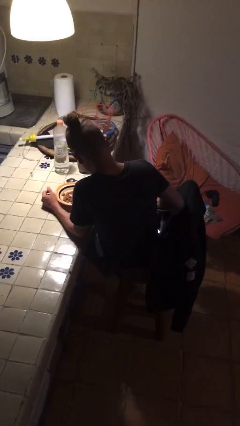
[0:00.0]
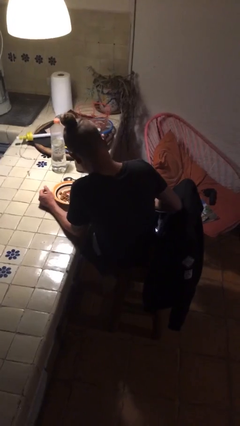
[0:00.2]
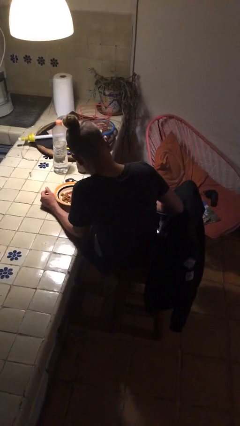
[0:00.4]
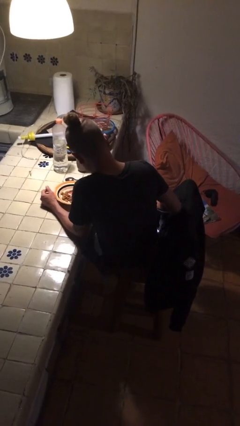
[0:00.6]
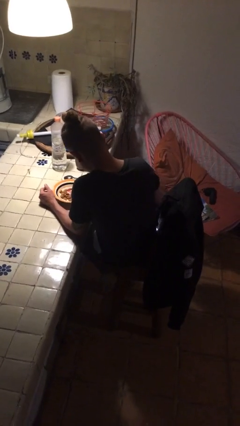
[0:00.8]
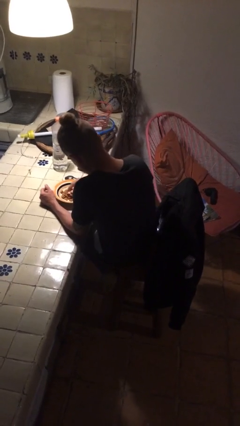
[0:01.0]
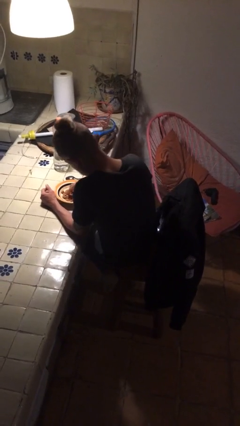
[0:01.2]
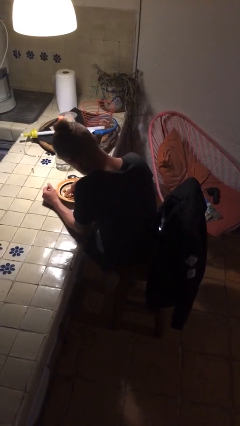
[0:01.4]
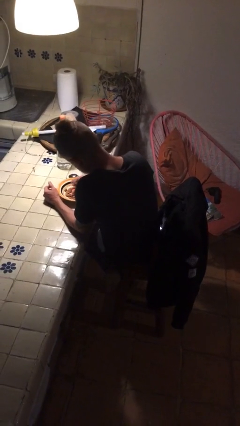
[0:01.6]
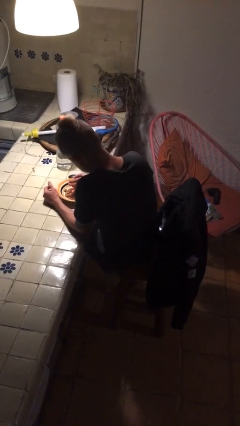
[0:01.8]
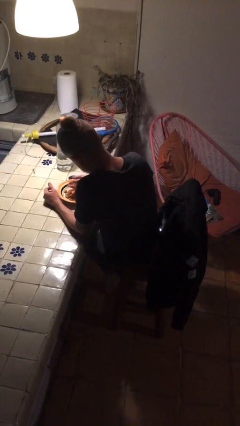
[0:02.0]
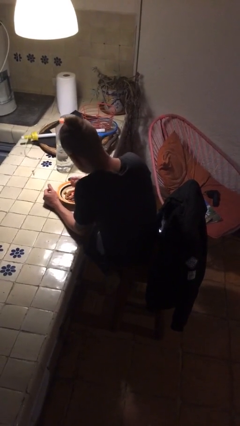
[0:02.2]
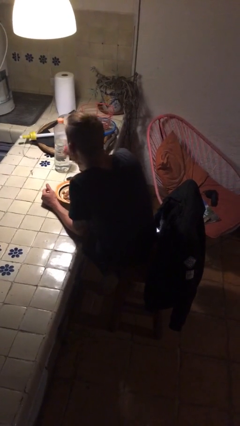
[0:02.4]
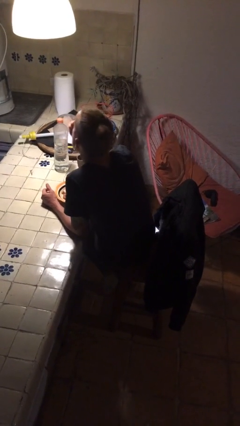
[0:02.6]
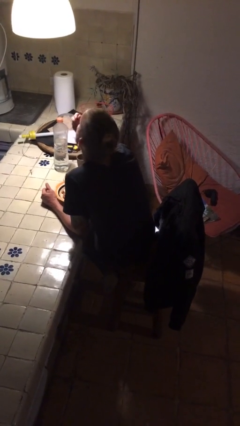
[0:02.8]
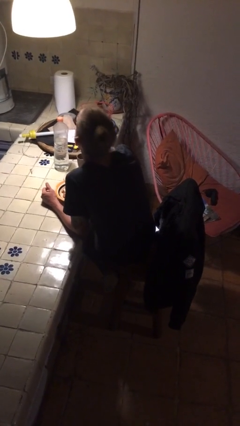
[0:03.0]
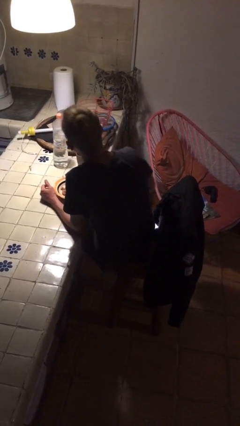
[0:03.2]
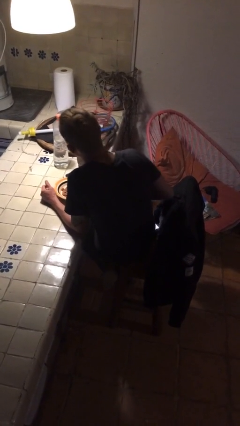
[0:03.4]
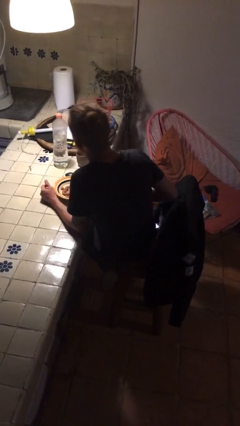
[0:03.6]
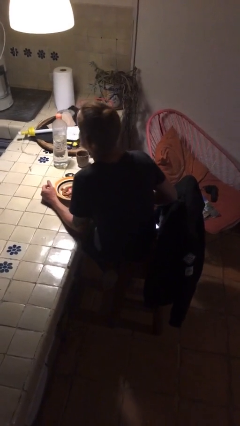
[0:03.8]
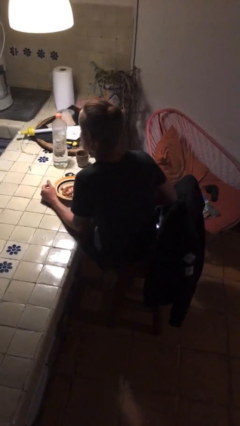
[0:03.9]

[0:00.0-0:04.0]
person eats with hands

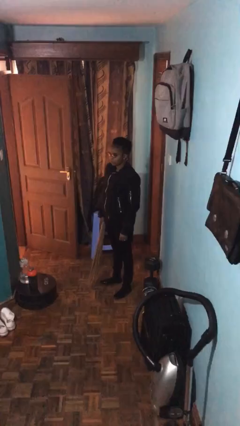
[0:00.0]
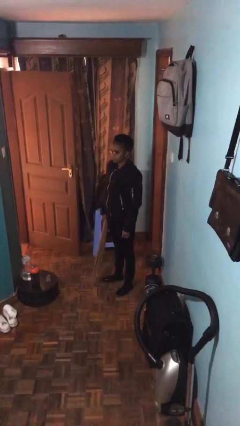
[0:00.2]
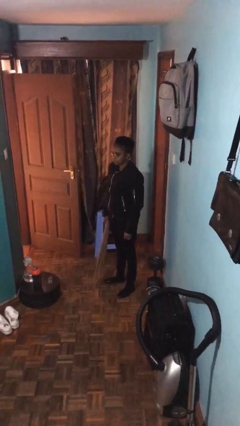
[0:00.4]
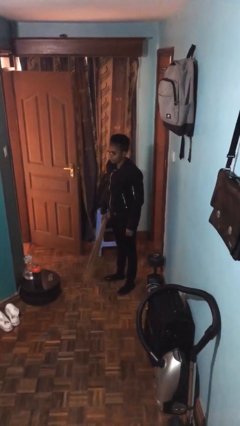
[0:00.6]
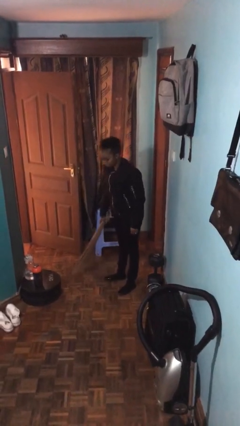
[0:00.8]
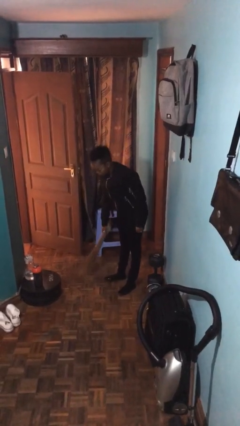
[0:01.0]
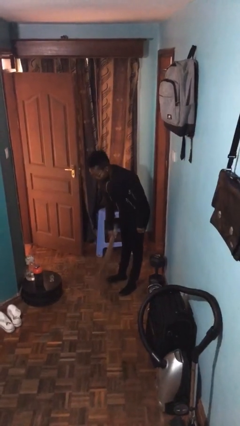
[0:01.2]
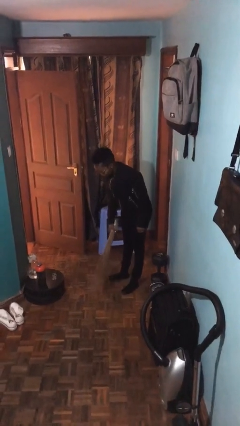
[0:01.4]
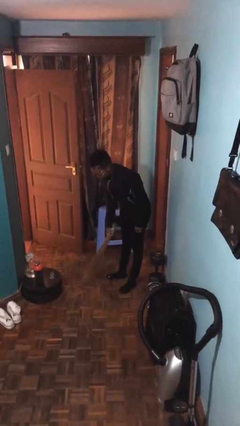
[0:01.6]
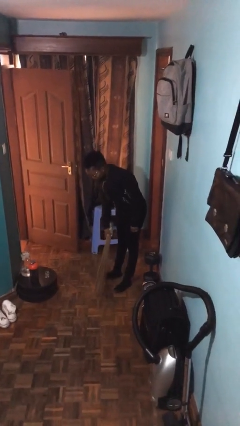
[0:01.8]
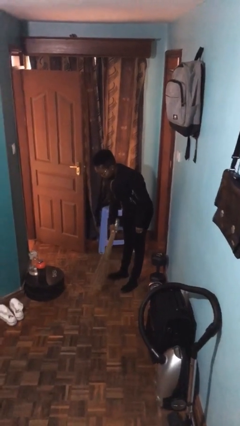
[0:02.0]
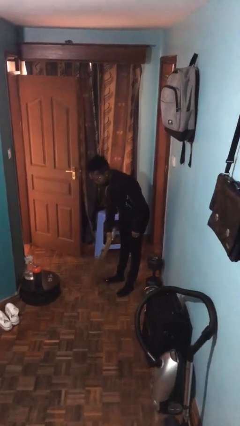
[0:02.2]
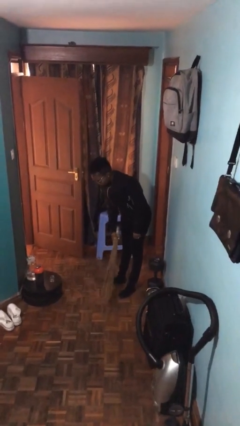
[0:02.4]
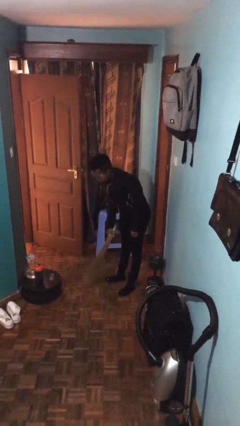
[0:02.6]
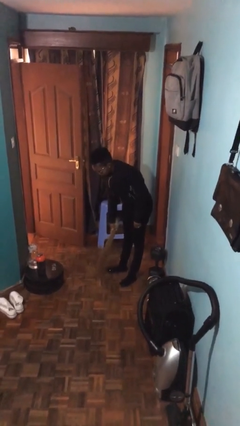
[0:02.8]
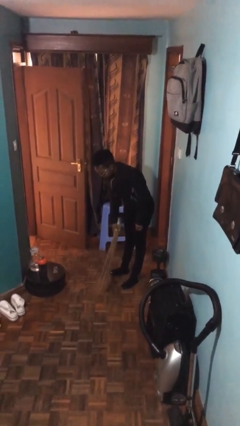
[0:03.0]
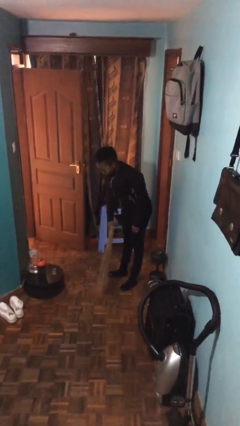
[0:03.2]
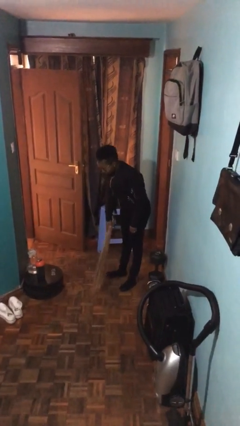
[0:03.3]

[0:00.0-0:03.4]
person sweeps floor

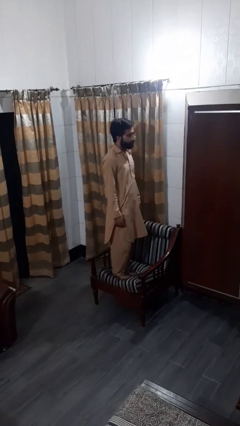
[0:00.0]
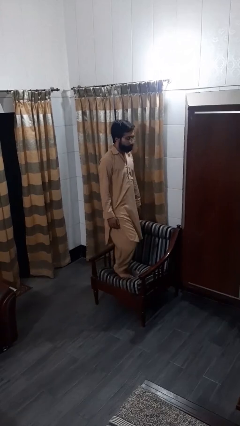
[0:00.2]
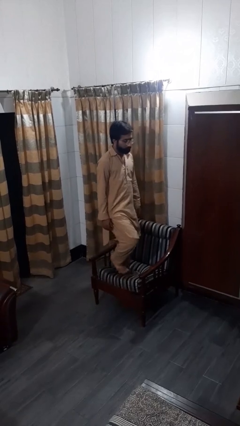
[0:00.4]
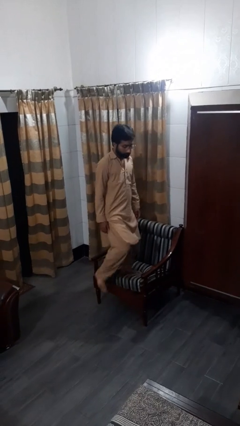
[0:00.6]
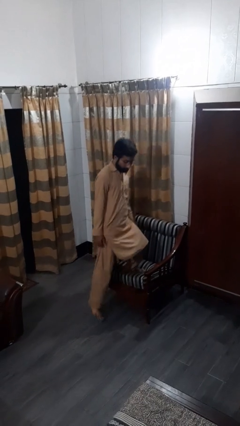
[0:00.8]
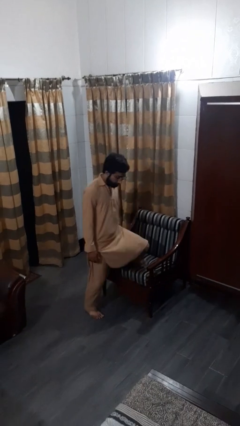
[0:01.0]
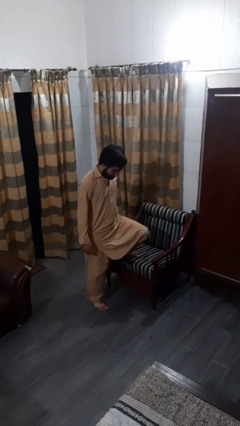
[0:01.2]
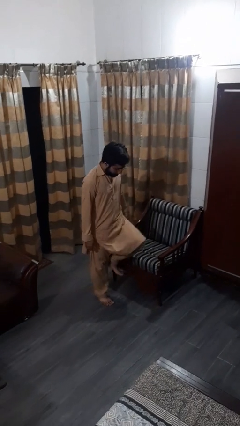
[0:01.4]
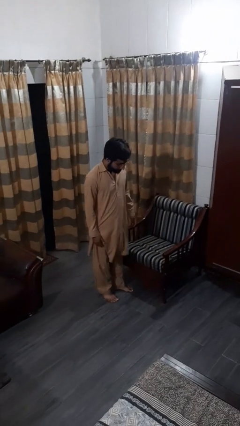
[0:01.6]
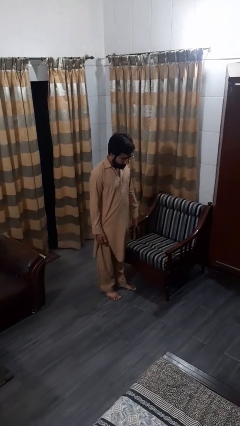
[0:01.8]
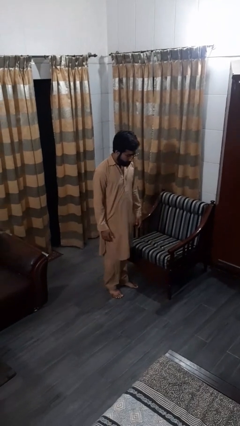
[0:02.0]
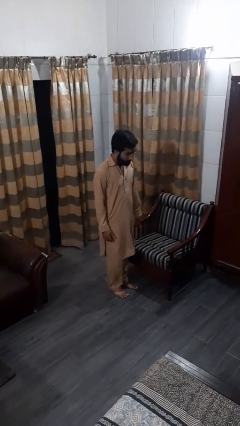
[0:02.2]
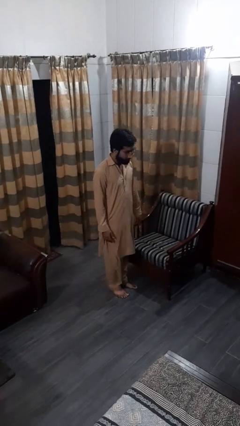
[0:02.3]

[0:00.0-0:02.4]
person climbs off chair

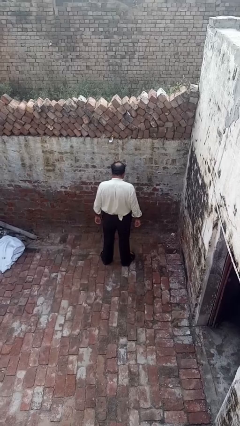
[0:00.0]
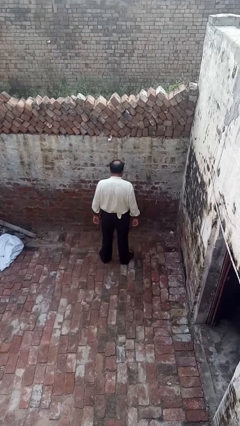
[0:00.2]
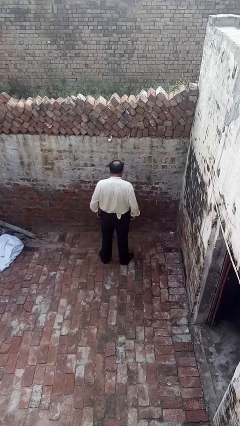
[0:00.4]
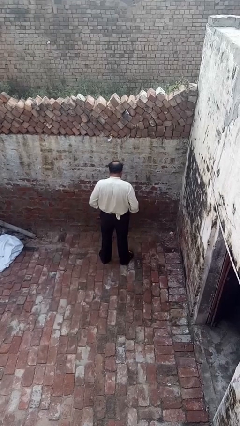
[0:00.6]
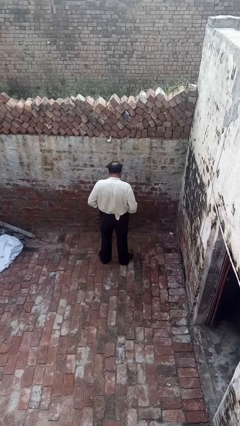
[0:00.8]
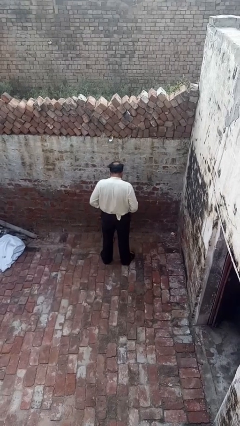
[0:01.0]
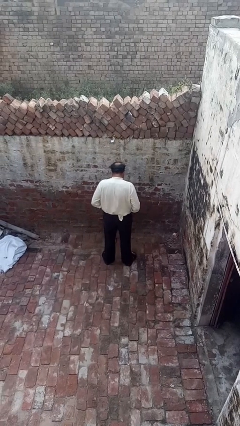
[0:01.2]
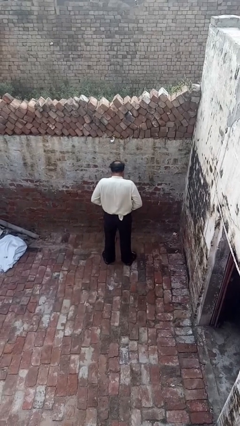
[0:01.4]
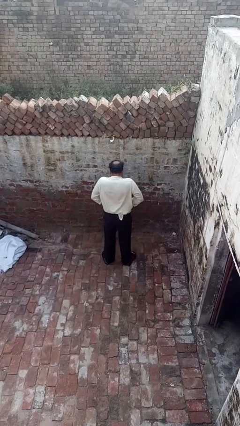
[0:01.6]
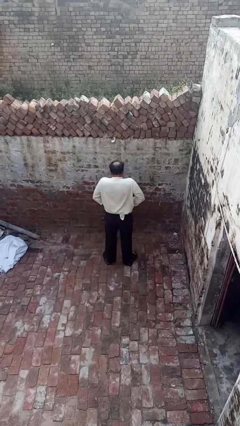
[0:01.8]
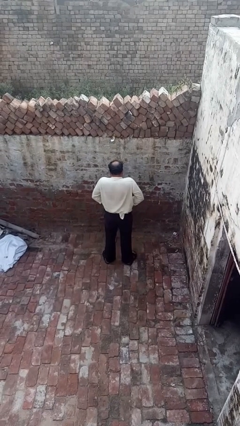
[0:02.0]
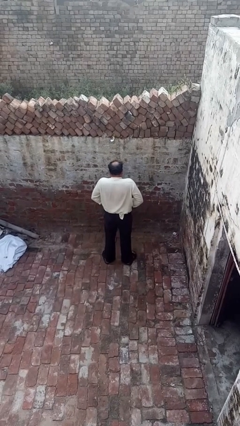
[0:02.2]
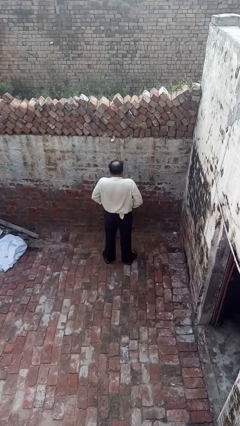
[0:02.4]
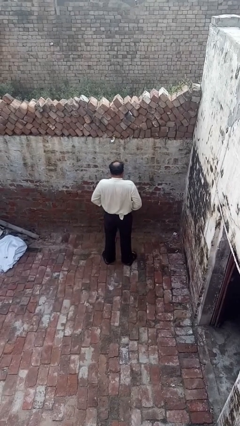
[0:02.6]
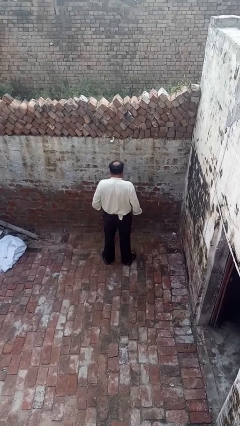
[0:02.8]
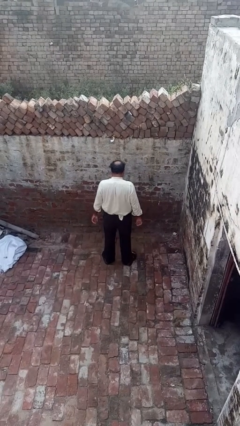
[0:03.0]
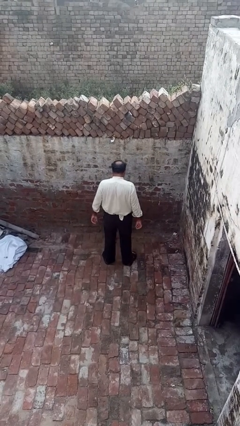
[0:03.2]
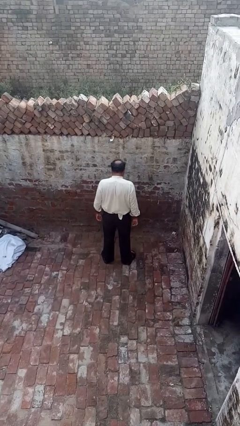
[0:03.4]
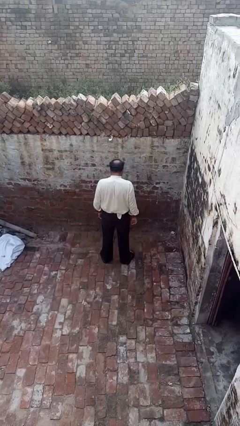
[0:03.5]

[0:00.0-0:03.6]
person hikes up pants

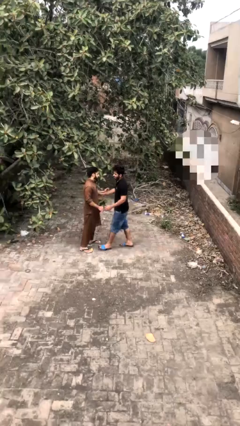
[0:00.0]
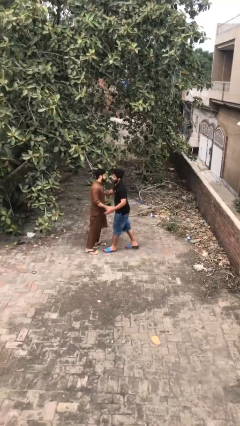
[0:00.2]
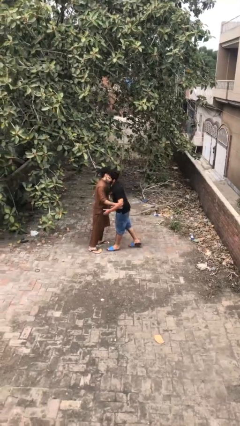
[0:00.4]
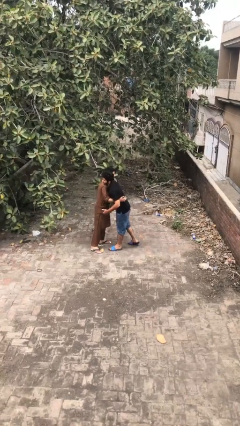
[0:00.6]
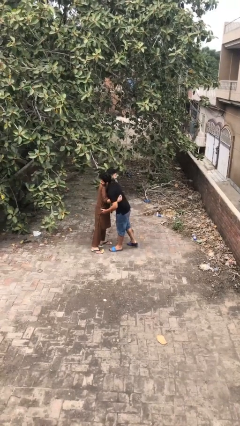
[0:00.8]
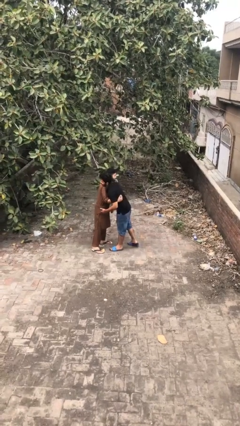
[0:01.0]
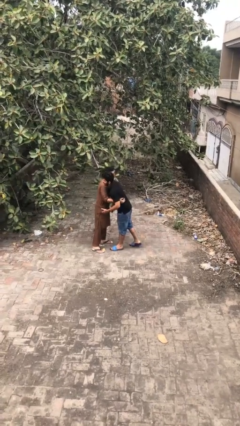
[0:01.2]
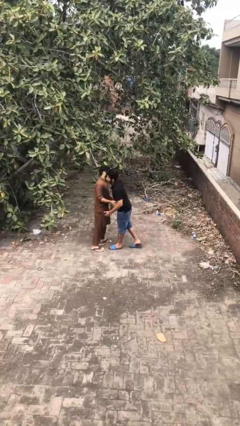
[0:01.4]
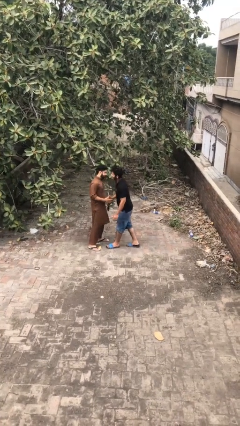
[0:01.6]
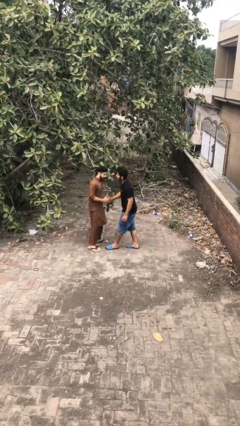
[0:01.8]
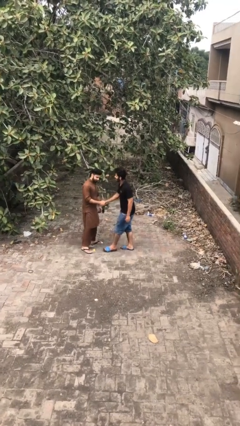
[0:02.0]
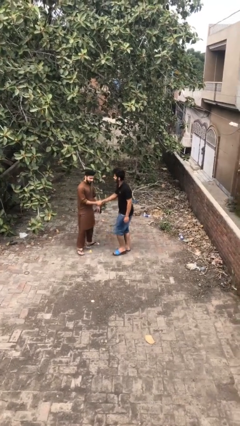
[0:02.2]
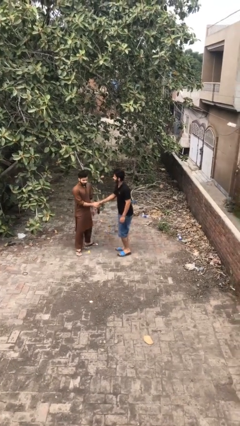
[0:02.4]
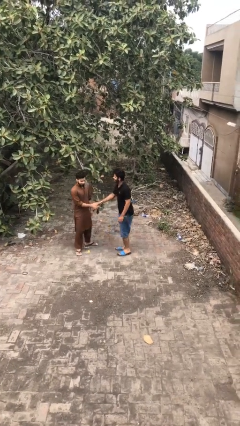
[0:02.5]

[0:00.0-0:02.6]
person embraces person

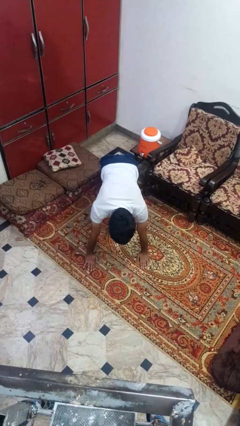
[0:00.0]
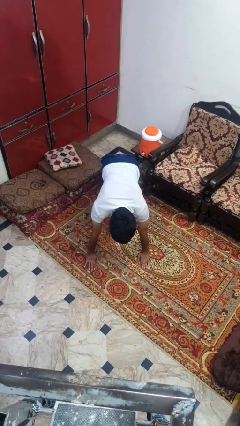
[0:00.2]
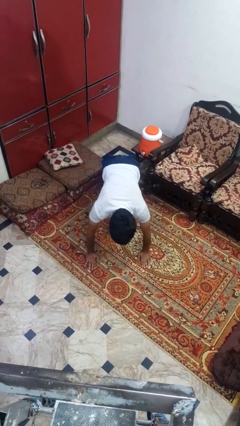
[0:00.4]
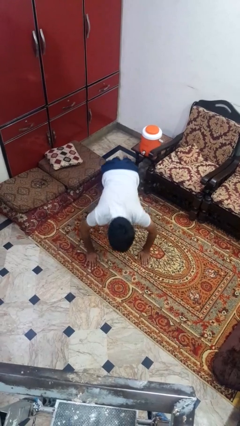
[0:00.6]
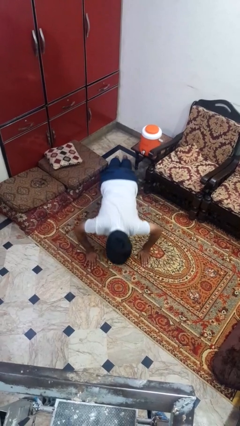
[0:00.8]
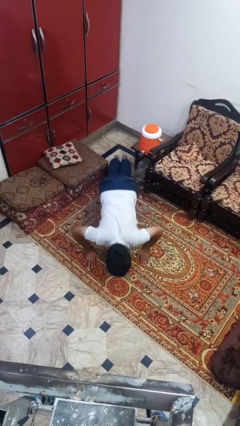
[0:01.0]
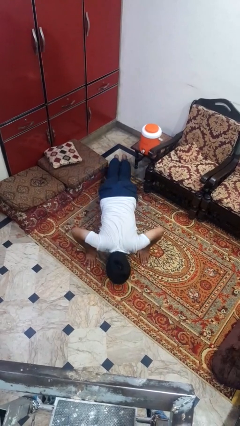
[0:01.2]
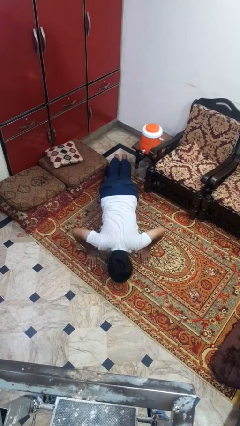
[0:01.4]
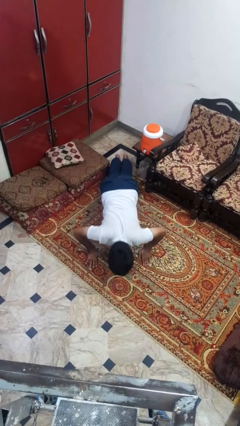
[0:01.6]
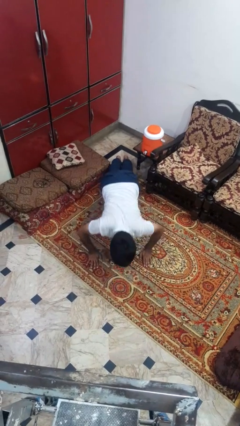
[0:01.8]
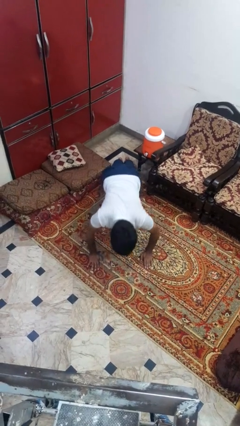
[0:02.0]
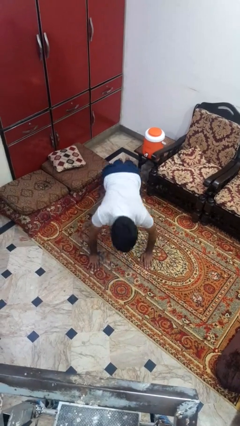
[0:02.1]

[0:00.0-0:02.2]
person exercises with pushup
